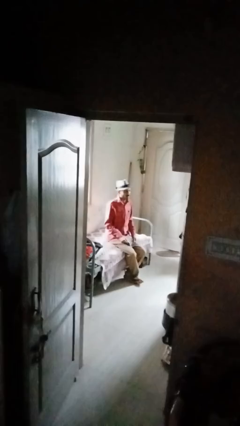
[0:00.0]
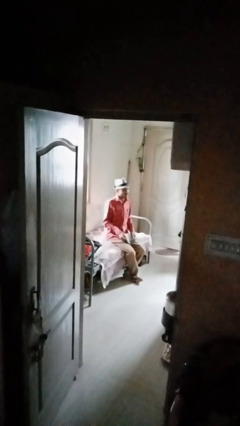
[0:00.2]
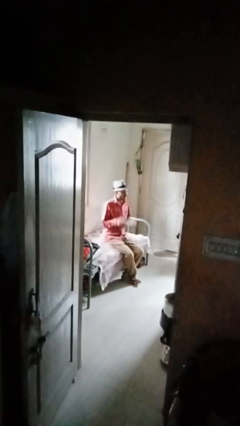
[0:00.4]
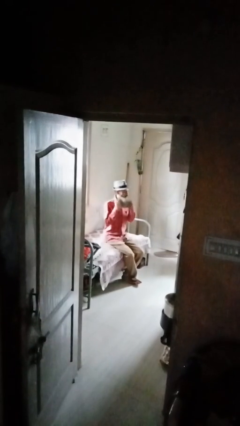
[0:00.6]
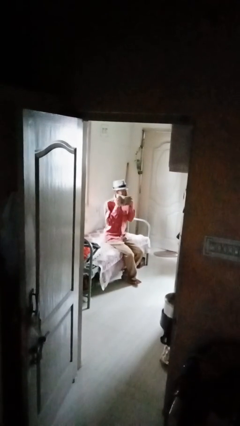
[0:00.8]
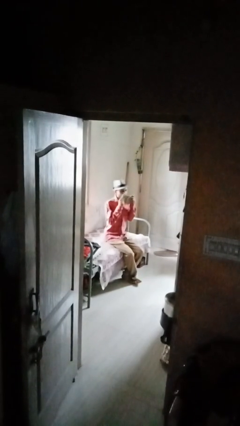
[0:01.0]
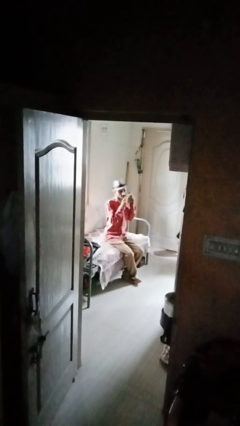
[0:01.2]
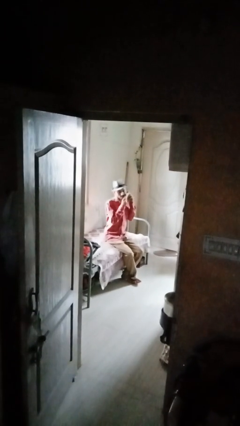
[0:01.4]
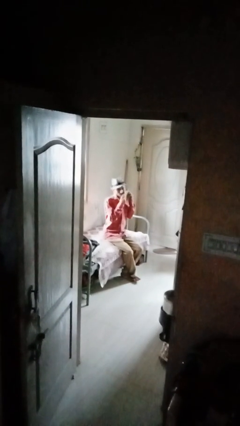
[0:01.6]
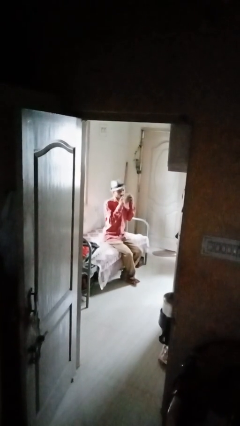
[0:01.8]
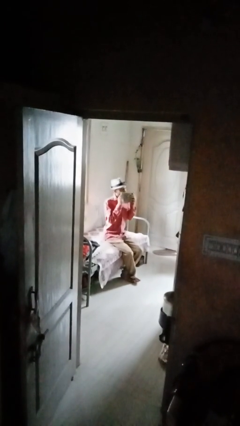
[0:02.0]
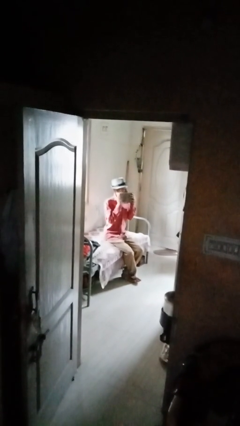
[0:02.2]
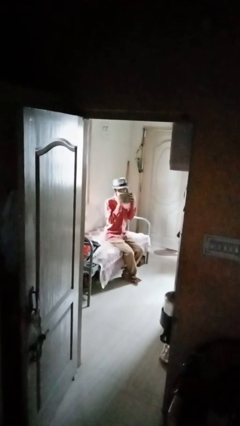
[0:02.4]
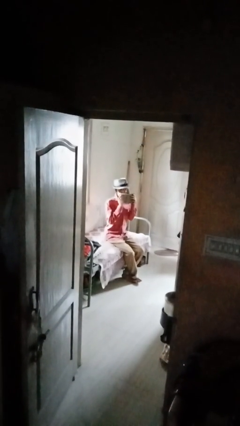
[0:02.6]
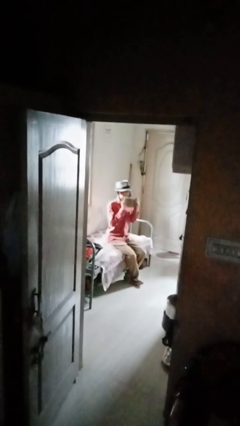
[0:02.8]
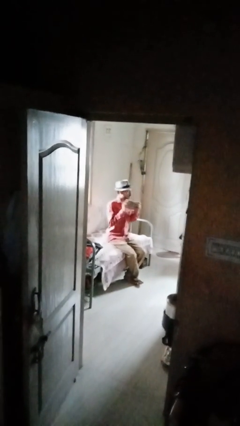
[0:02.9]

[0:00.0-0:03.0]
person wipes mouth with napkin

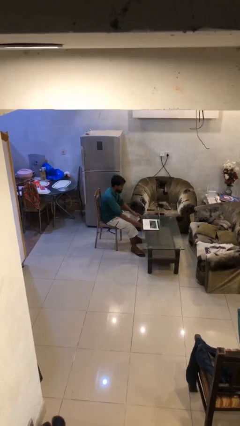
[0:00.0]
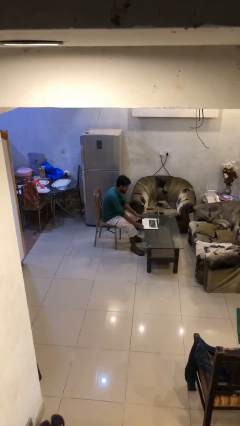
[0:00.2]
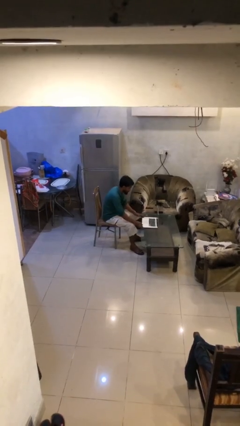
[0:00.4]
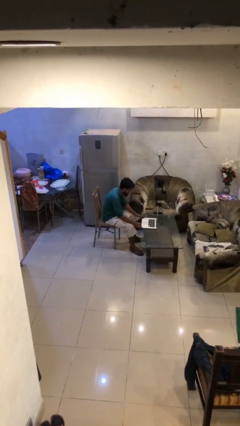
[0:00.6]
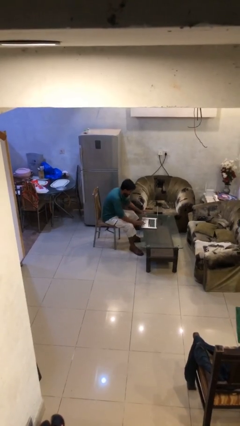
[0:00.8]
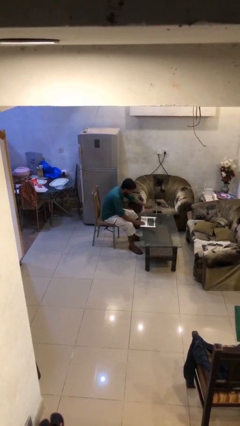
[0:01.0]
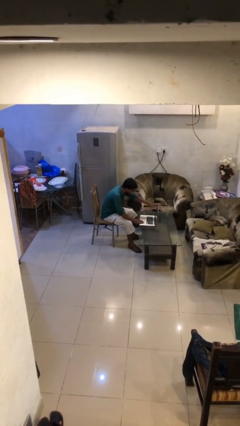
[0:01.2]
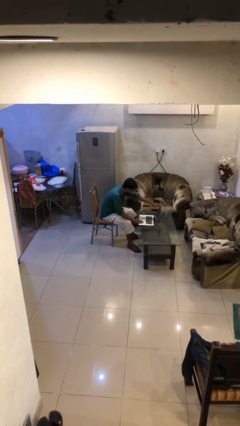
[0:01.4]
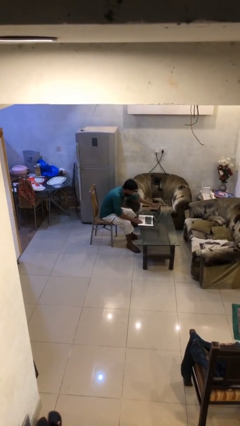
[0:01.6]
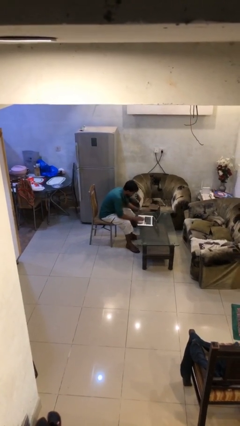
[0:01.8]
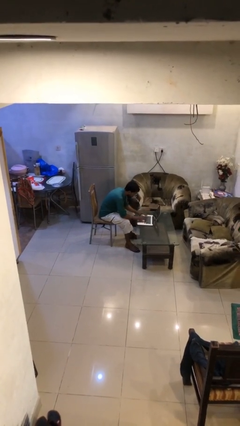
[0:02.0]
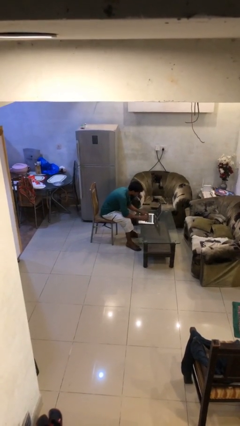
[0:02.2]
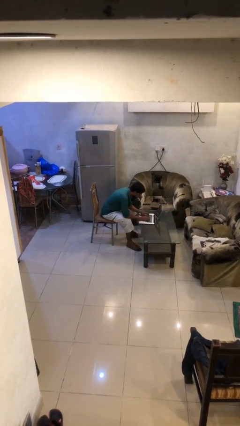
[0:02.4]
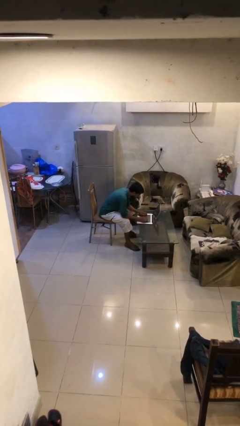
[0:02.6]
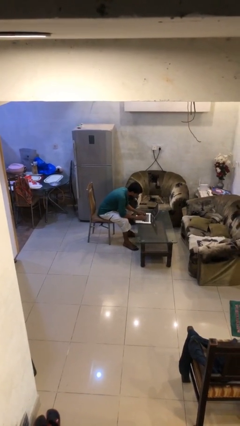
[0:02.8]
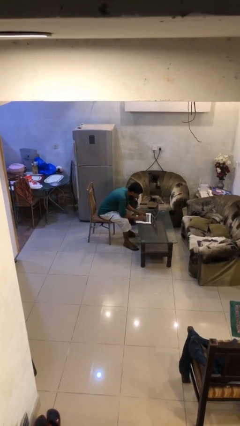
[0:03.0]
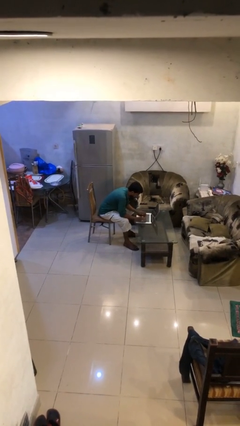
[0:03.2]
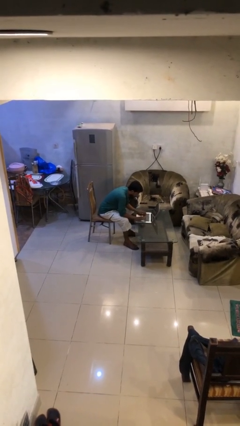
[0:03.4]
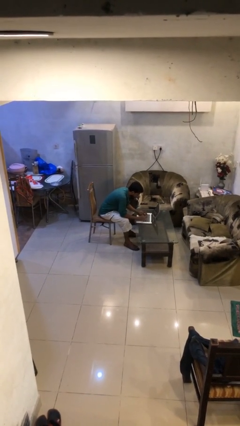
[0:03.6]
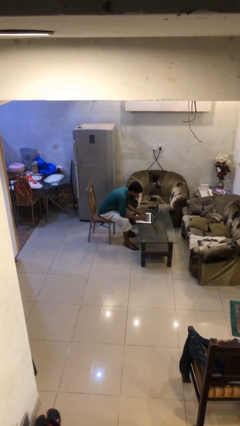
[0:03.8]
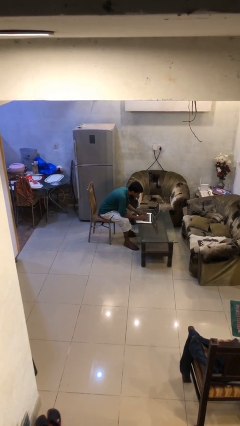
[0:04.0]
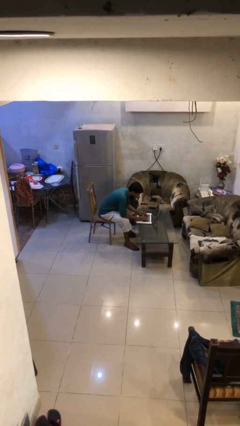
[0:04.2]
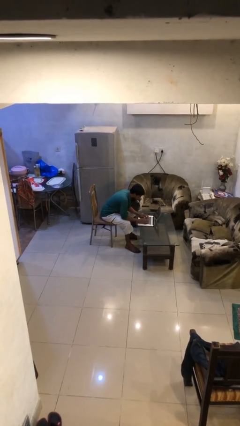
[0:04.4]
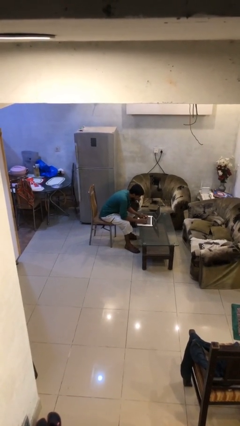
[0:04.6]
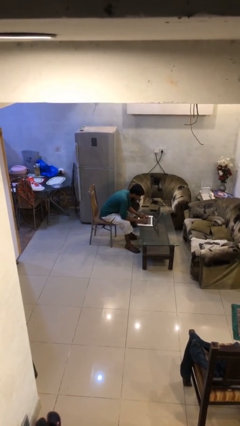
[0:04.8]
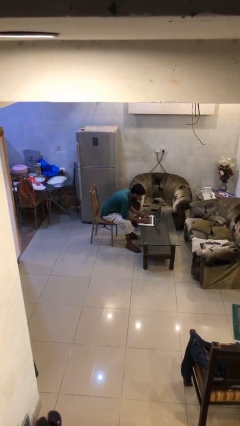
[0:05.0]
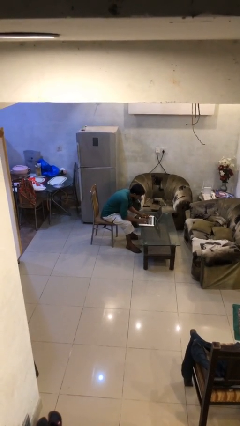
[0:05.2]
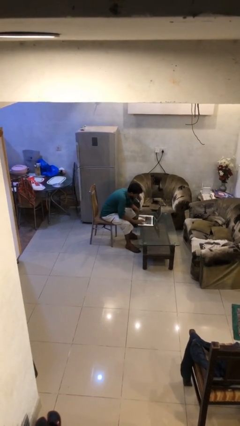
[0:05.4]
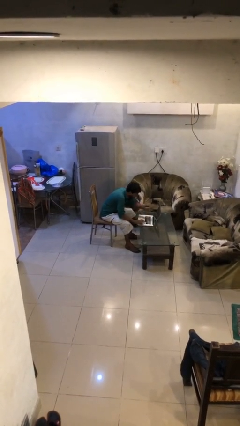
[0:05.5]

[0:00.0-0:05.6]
person interacts with laptop

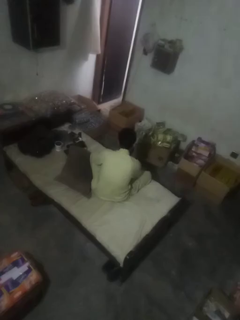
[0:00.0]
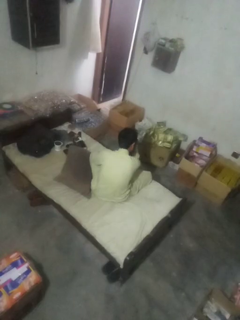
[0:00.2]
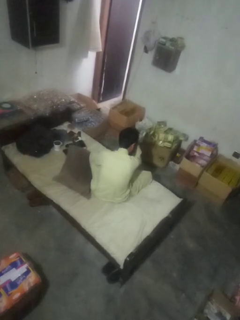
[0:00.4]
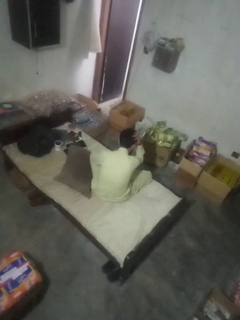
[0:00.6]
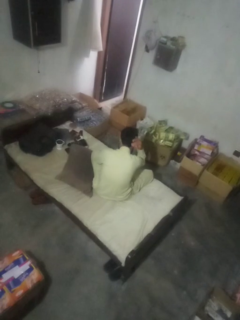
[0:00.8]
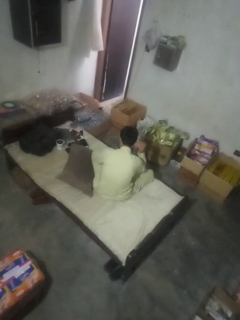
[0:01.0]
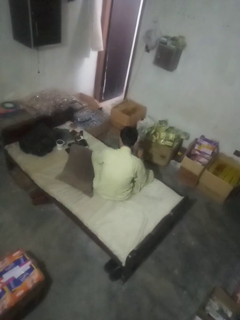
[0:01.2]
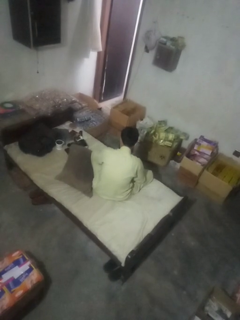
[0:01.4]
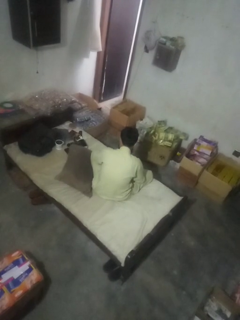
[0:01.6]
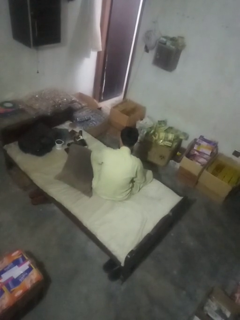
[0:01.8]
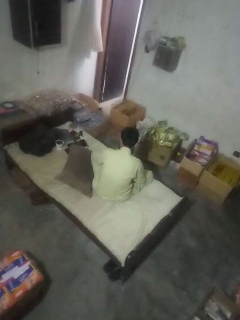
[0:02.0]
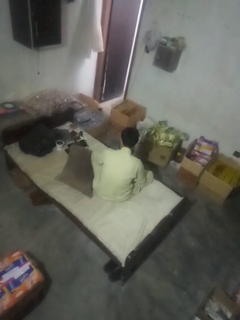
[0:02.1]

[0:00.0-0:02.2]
person strokes hair

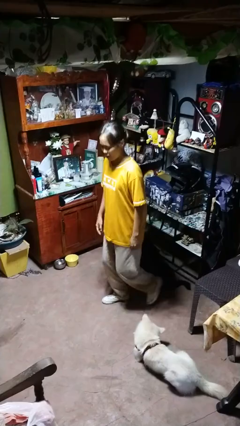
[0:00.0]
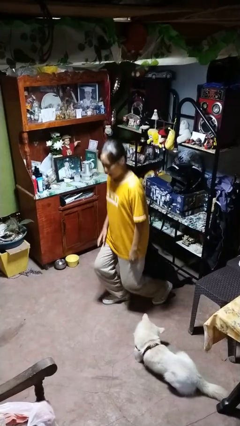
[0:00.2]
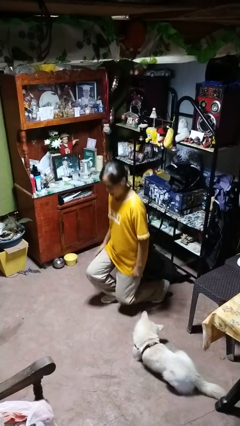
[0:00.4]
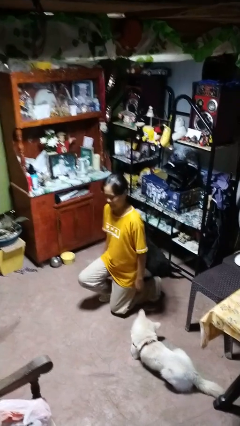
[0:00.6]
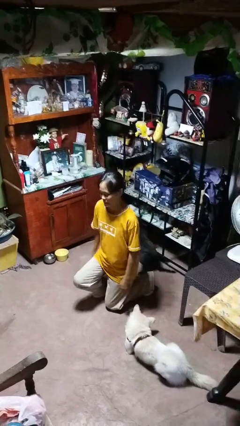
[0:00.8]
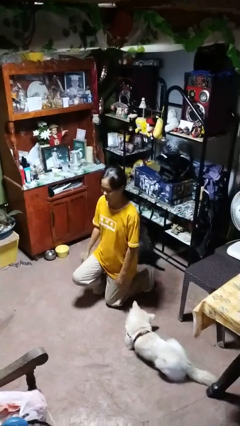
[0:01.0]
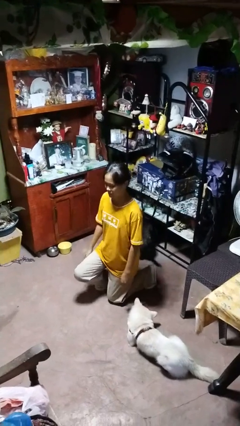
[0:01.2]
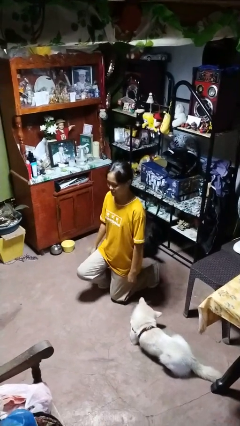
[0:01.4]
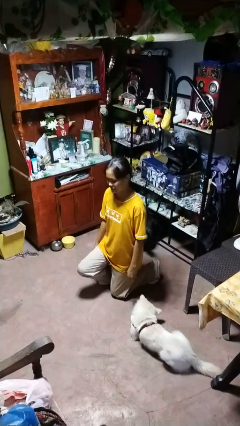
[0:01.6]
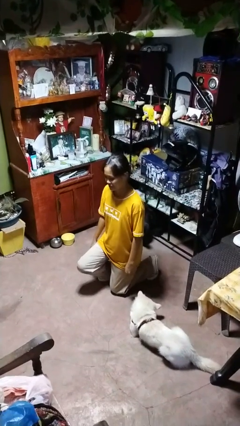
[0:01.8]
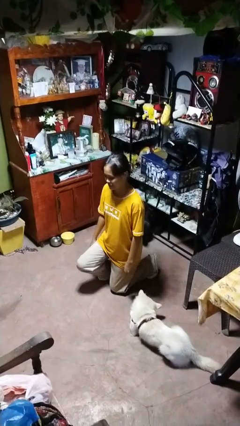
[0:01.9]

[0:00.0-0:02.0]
person kneels

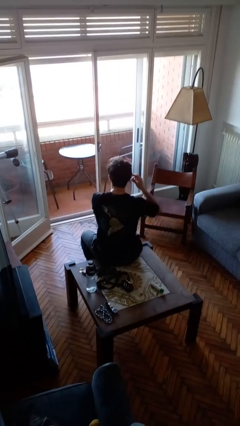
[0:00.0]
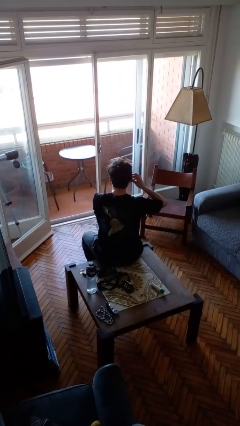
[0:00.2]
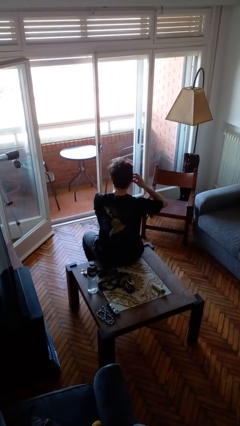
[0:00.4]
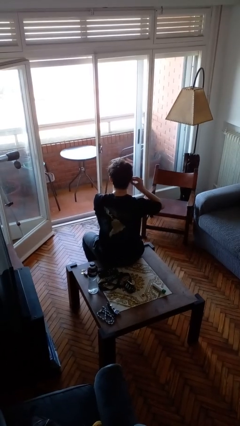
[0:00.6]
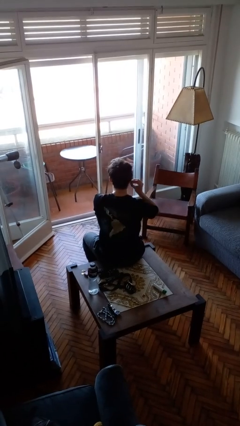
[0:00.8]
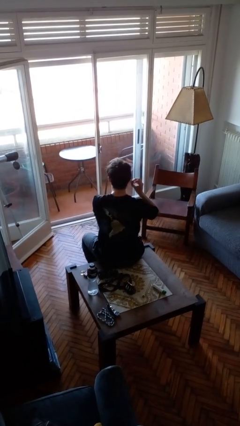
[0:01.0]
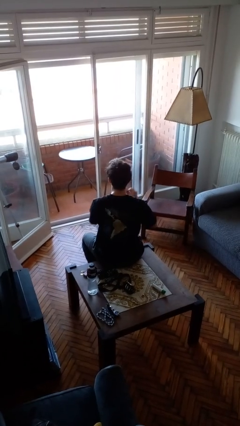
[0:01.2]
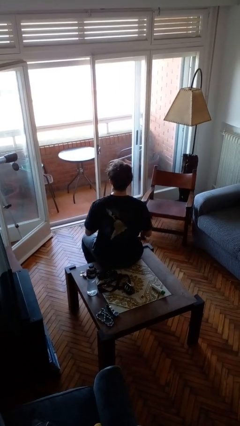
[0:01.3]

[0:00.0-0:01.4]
person takes off earrings

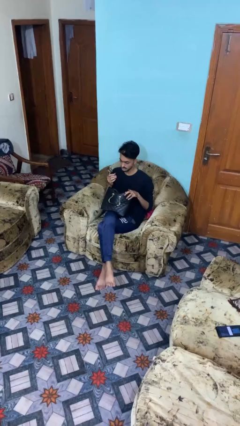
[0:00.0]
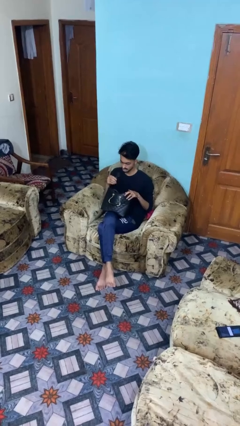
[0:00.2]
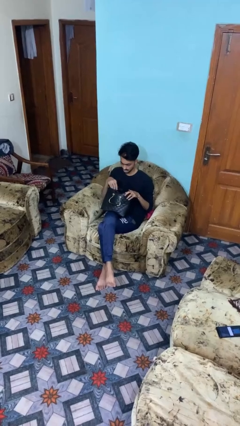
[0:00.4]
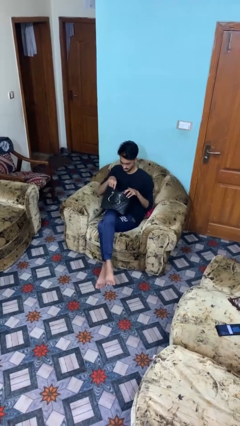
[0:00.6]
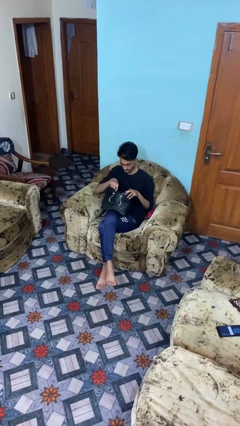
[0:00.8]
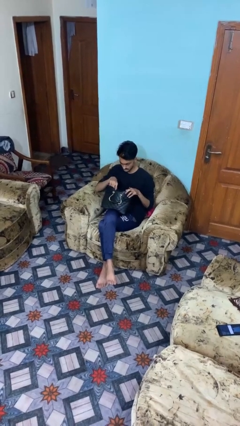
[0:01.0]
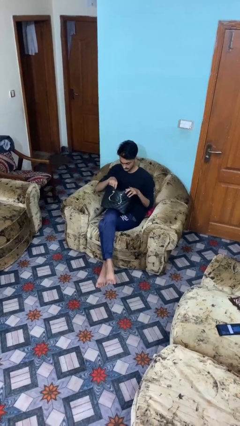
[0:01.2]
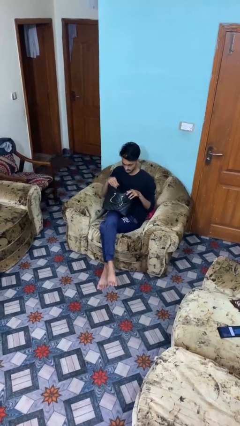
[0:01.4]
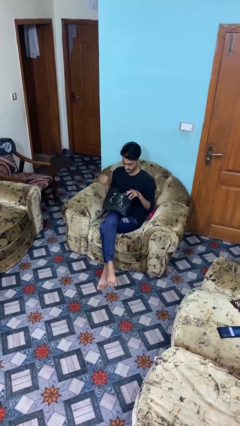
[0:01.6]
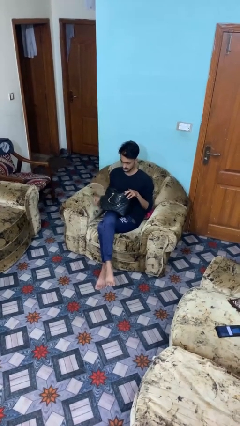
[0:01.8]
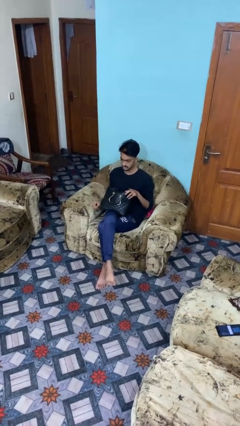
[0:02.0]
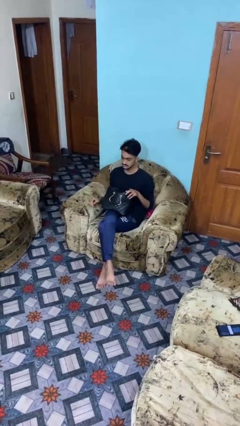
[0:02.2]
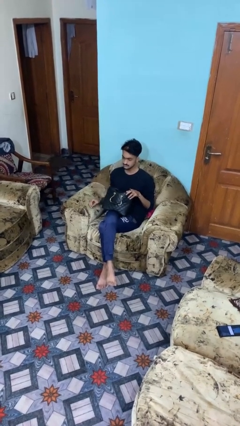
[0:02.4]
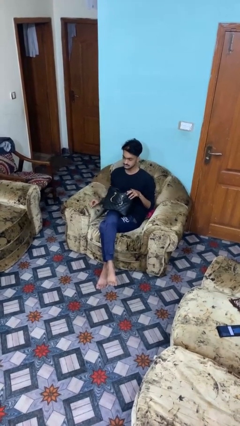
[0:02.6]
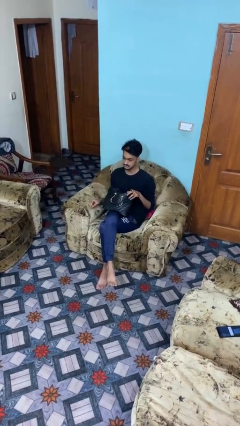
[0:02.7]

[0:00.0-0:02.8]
person puts object into purse

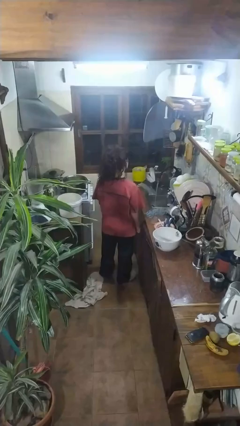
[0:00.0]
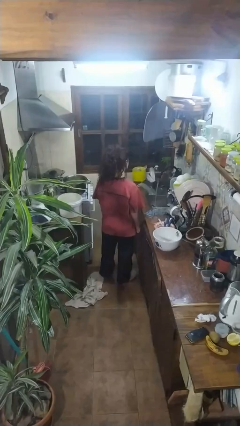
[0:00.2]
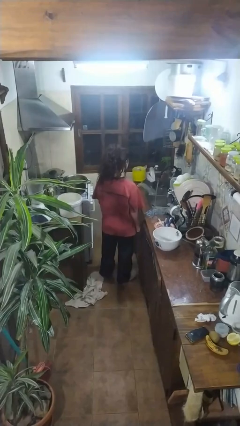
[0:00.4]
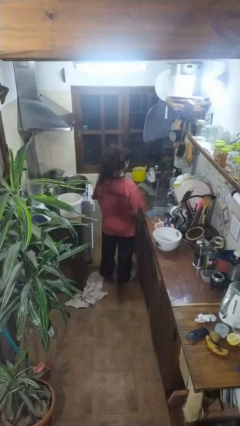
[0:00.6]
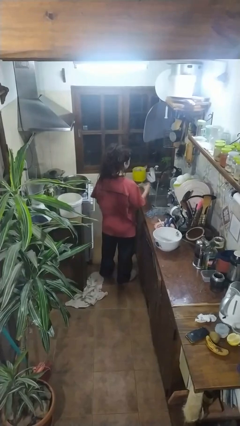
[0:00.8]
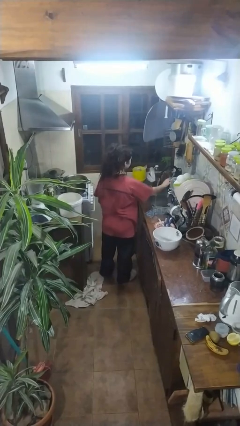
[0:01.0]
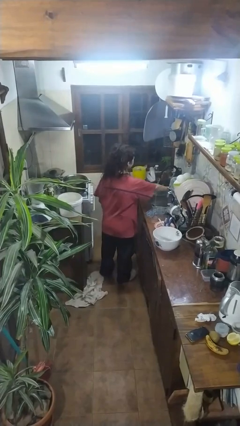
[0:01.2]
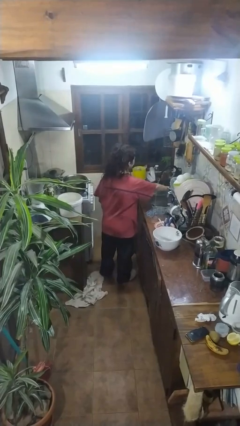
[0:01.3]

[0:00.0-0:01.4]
person turns off faucet
